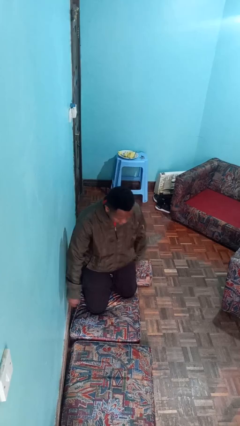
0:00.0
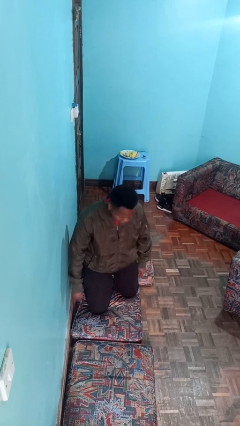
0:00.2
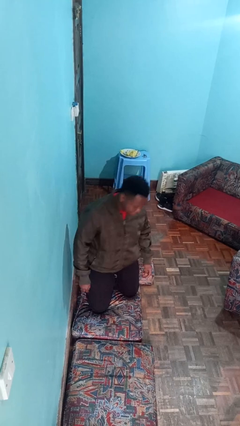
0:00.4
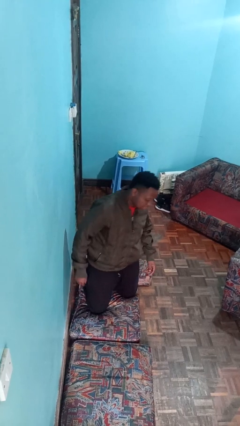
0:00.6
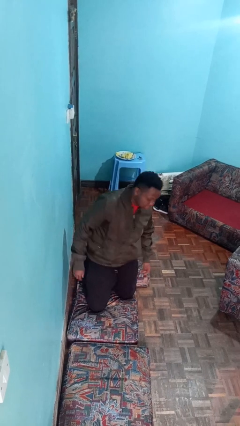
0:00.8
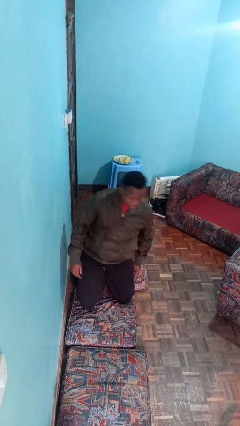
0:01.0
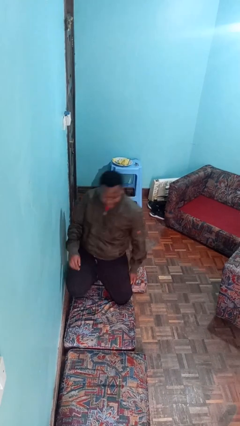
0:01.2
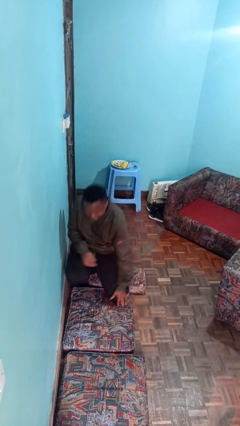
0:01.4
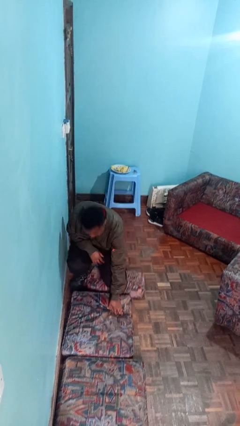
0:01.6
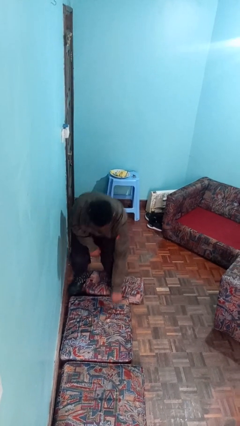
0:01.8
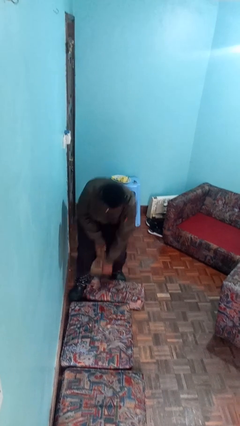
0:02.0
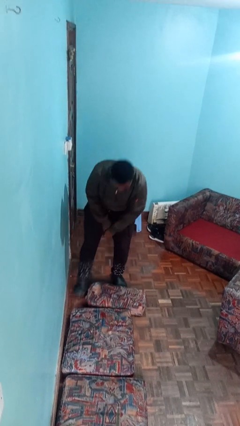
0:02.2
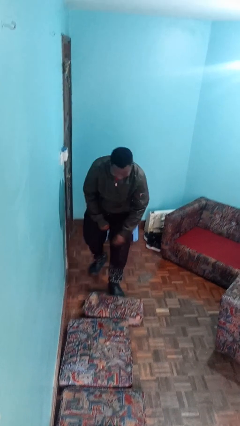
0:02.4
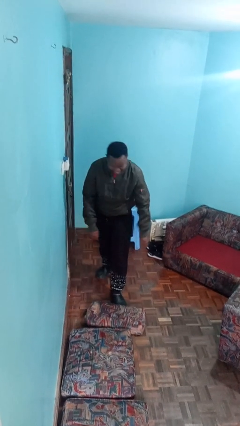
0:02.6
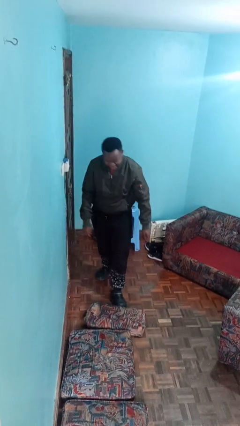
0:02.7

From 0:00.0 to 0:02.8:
person stands up from floor

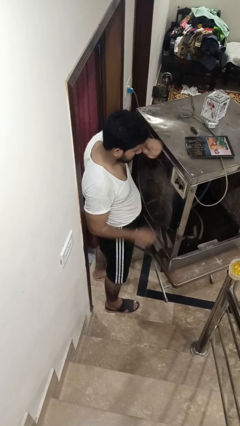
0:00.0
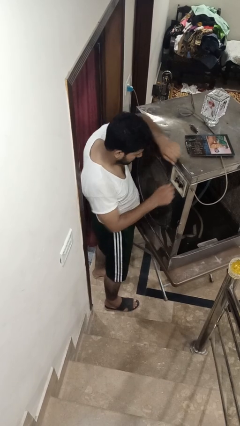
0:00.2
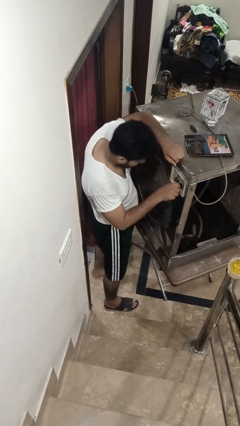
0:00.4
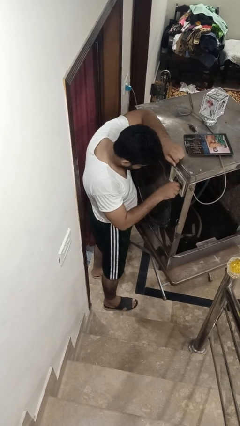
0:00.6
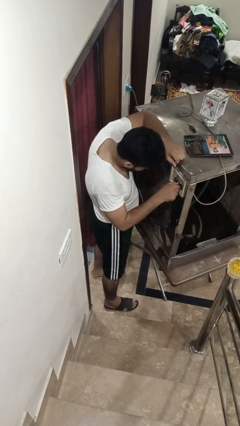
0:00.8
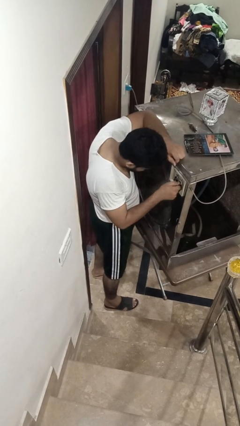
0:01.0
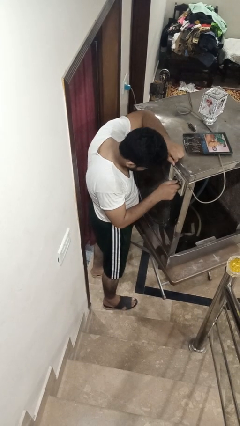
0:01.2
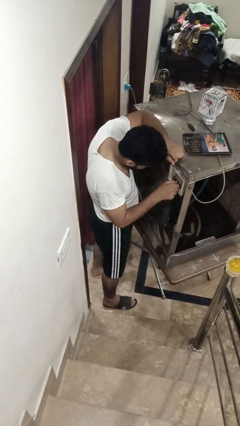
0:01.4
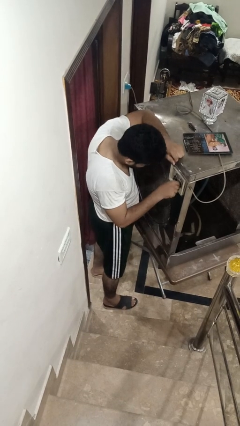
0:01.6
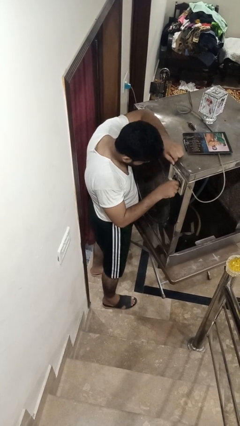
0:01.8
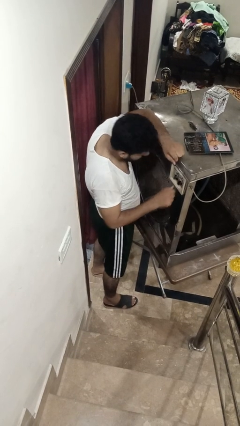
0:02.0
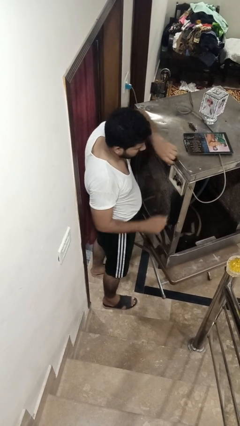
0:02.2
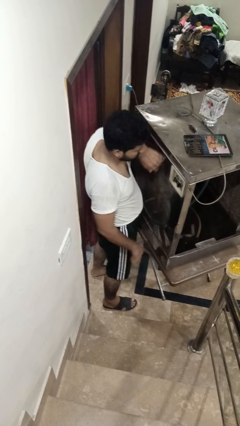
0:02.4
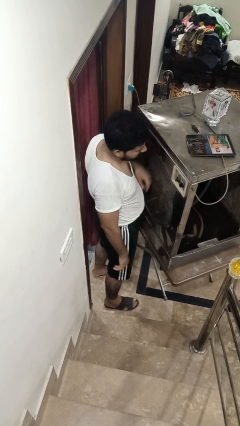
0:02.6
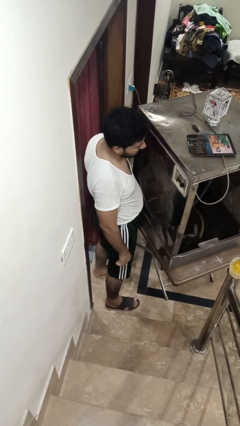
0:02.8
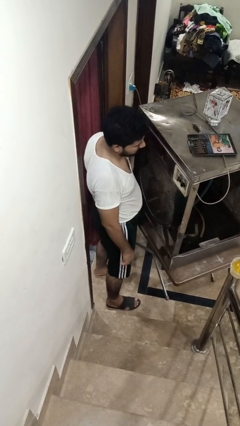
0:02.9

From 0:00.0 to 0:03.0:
person adjusts thermostat

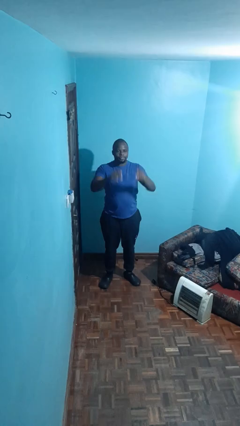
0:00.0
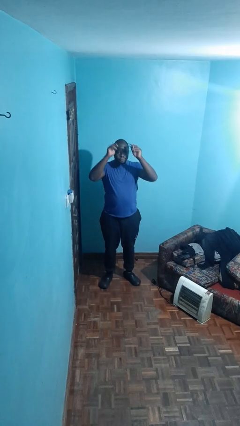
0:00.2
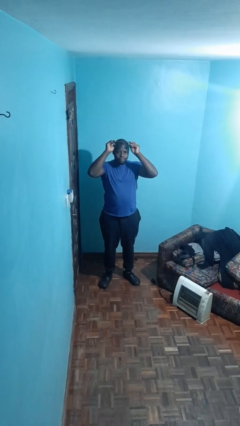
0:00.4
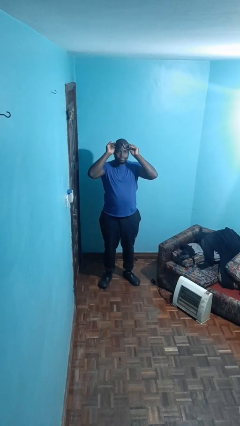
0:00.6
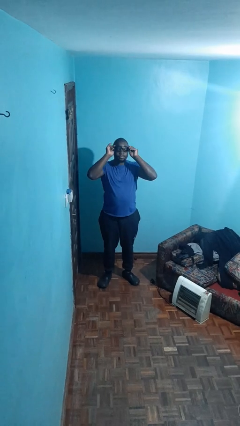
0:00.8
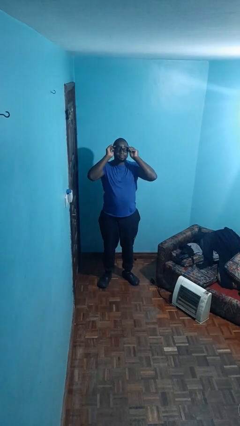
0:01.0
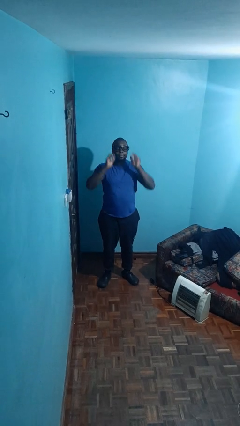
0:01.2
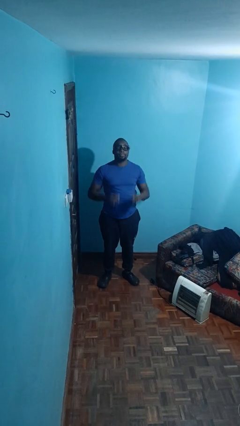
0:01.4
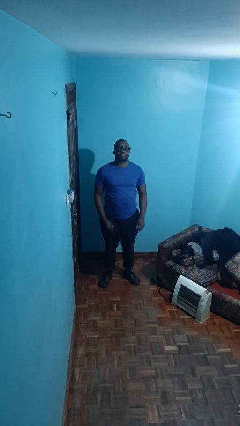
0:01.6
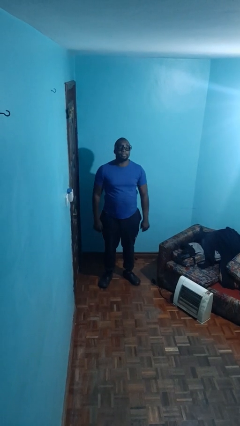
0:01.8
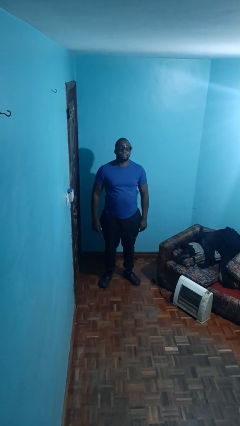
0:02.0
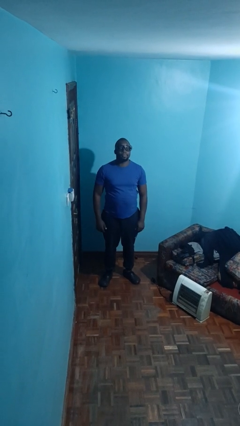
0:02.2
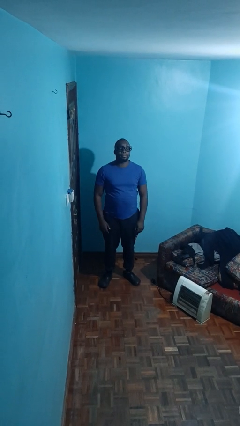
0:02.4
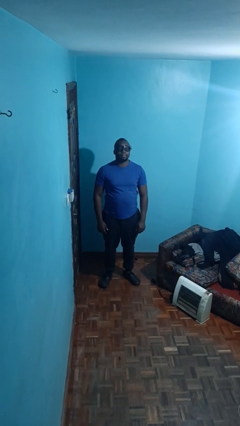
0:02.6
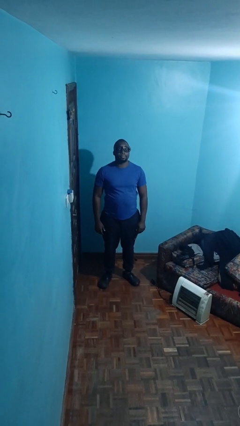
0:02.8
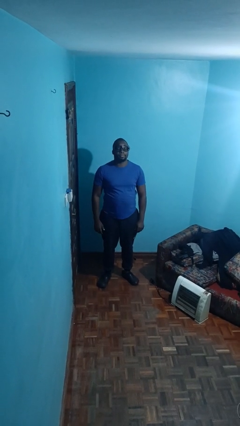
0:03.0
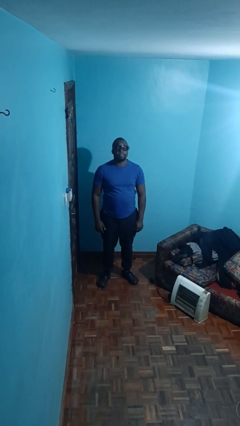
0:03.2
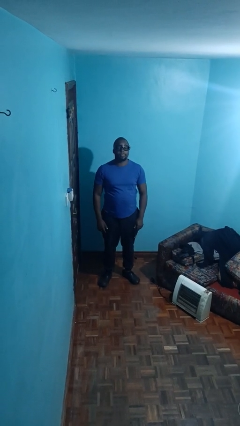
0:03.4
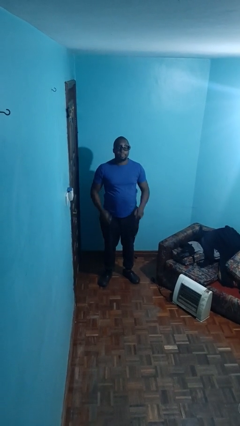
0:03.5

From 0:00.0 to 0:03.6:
person puts on glasses

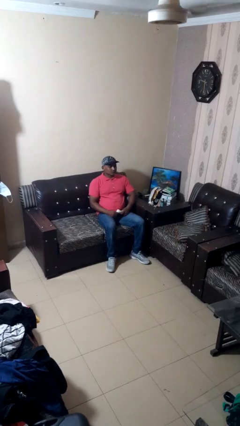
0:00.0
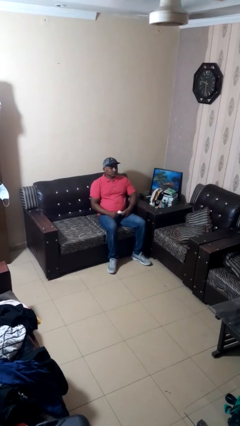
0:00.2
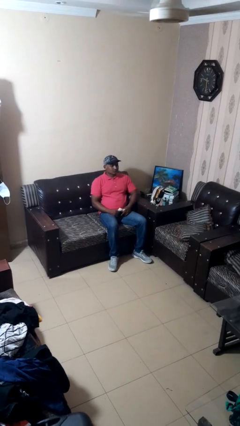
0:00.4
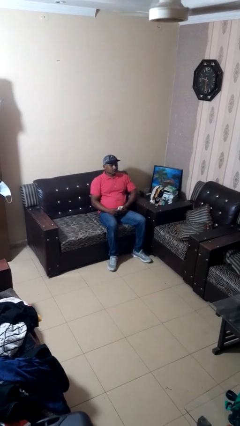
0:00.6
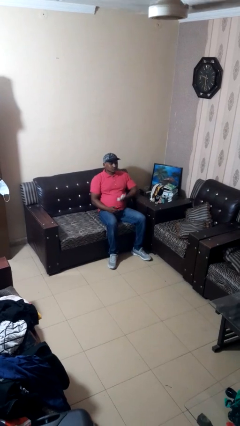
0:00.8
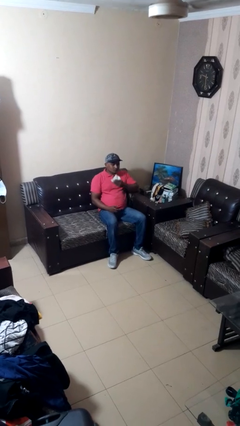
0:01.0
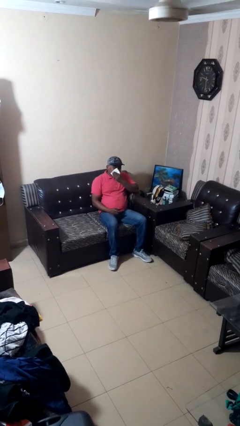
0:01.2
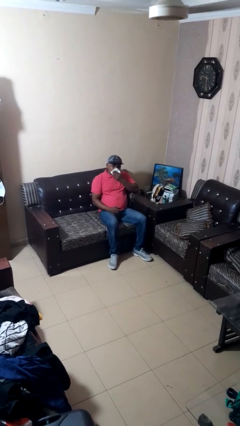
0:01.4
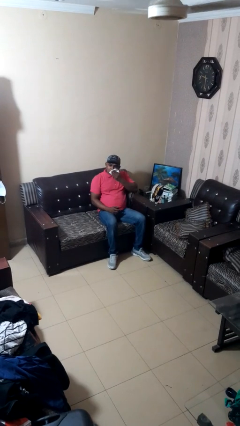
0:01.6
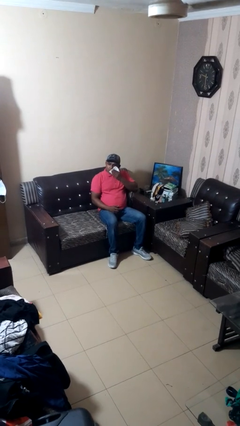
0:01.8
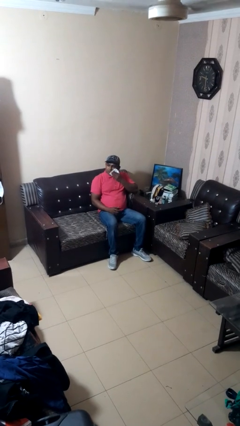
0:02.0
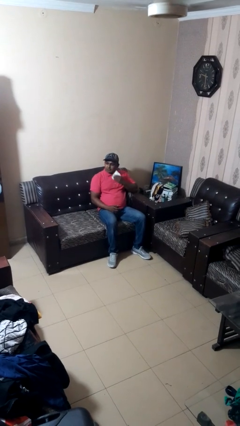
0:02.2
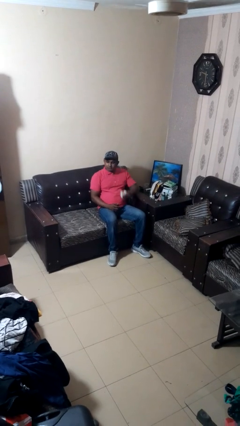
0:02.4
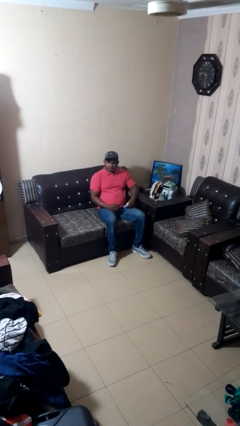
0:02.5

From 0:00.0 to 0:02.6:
person wipes mouth with napkin

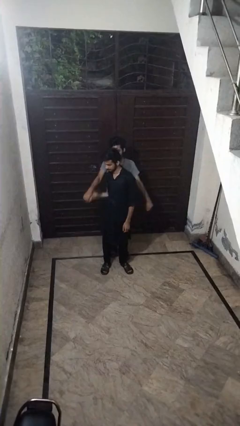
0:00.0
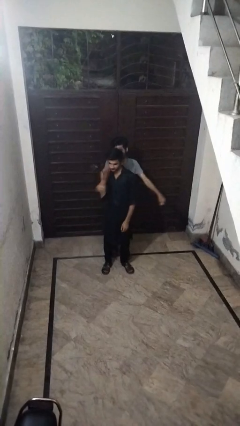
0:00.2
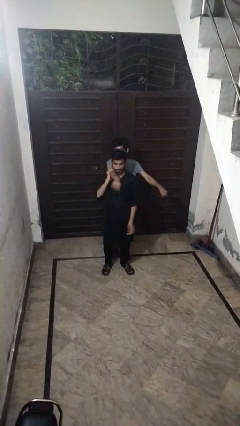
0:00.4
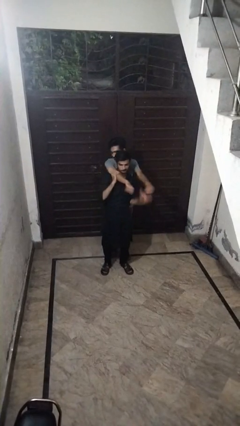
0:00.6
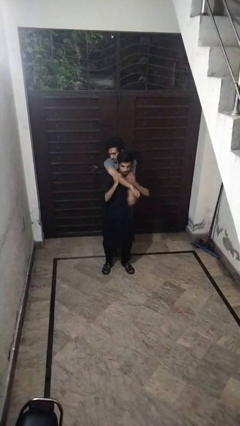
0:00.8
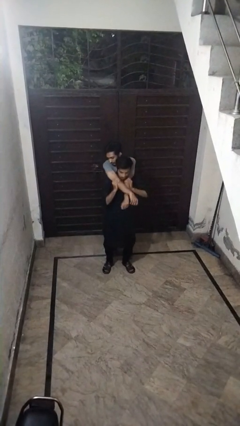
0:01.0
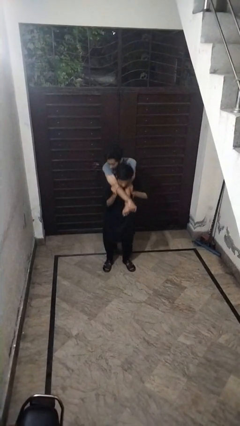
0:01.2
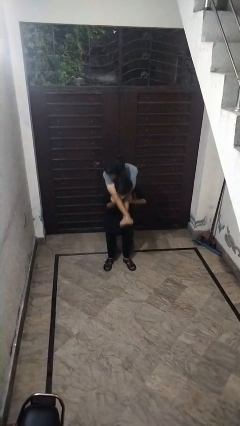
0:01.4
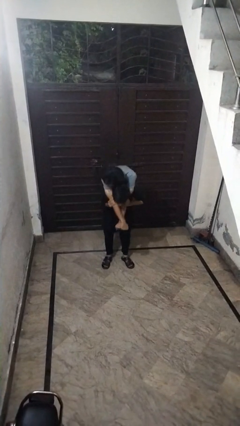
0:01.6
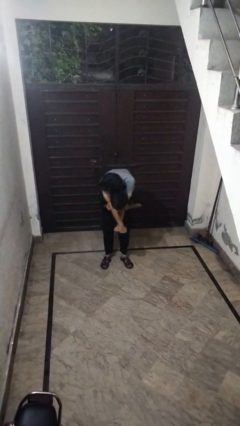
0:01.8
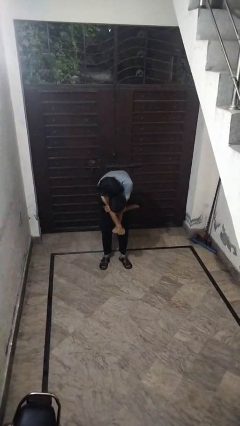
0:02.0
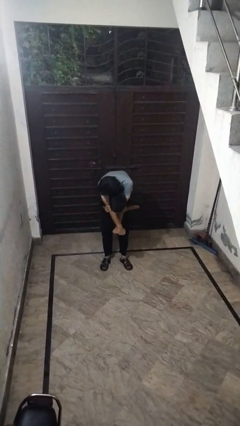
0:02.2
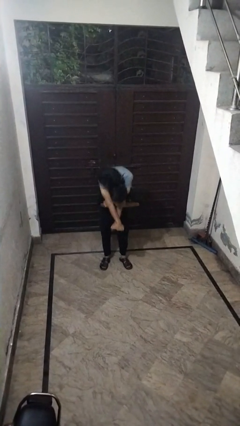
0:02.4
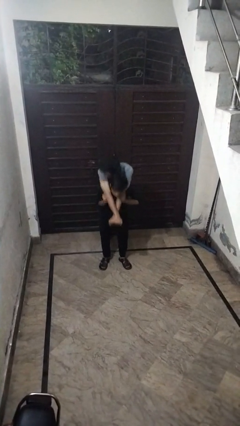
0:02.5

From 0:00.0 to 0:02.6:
person carries person over shoulder

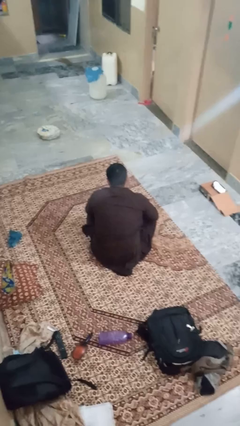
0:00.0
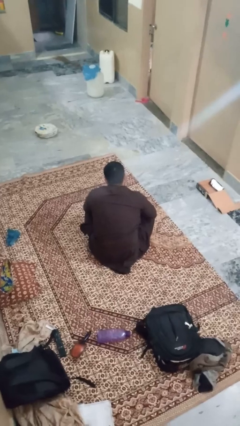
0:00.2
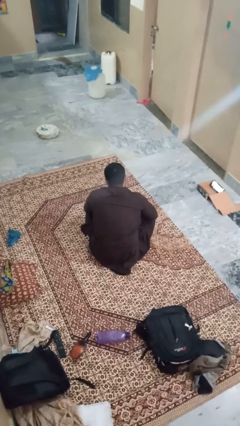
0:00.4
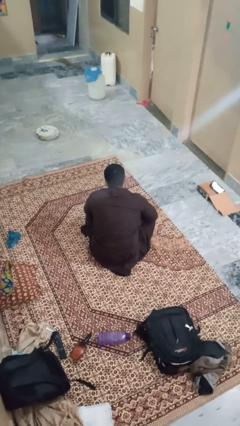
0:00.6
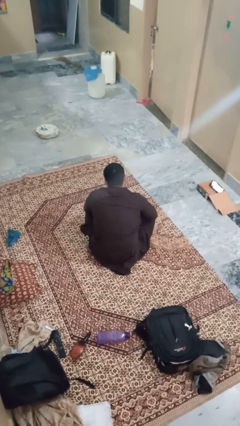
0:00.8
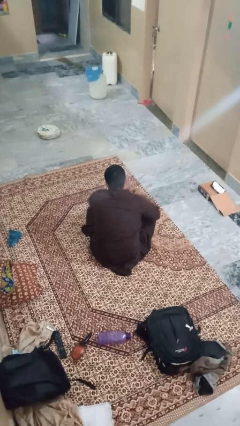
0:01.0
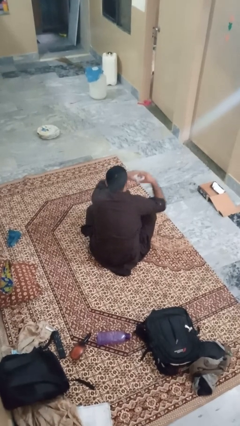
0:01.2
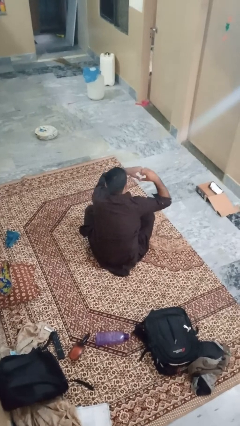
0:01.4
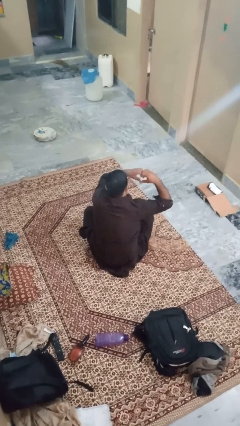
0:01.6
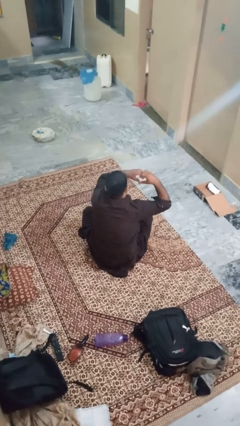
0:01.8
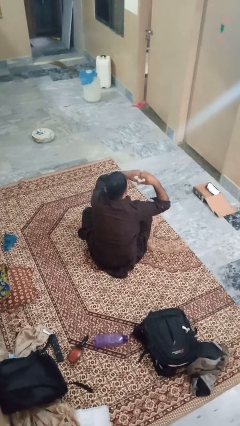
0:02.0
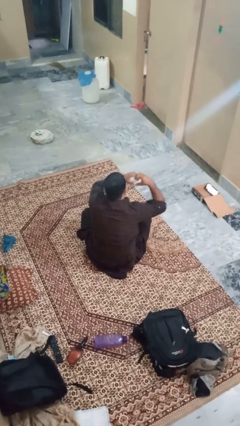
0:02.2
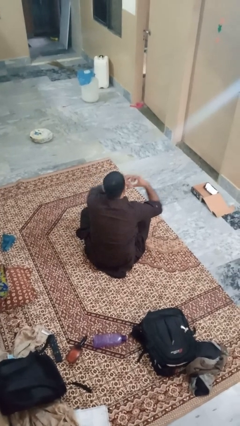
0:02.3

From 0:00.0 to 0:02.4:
person gestures heart

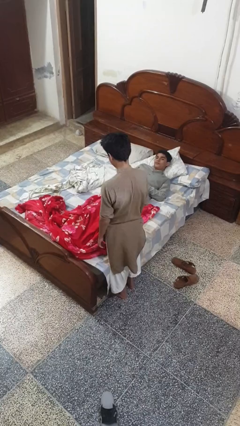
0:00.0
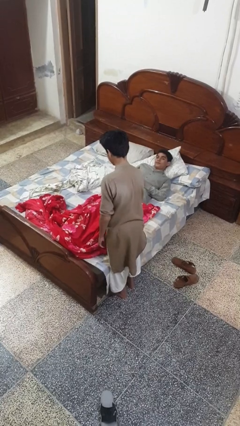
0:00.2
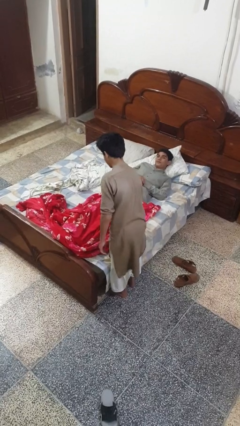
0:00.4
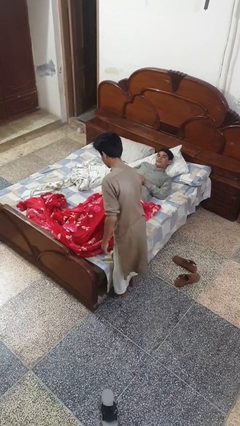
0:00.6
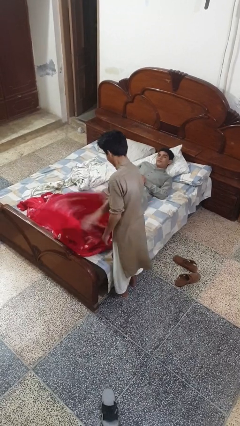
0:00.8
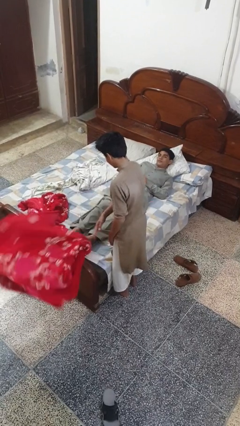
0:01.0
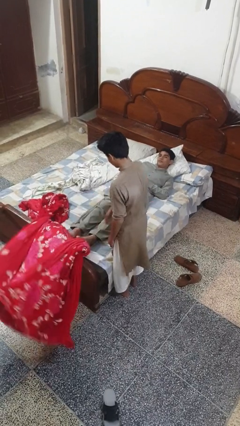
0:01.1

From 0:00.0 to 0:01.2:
person uncovers friend with blanket
